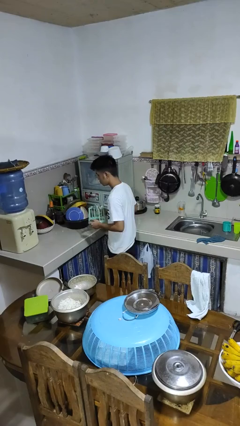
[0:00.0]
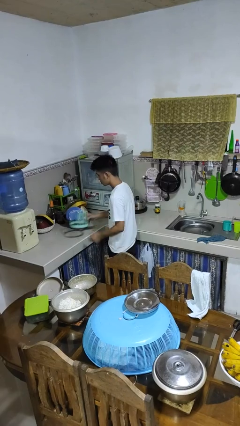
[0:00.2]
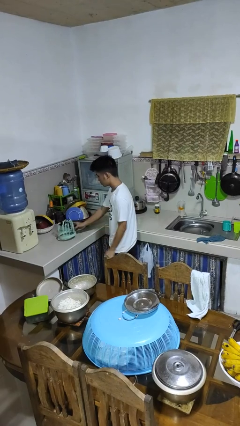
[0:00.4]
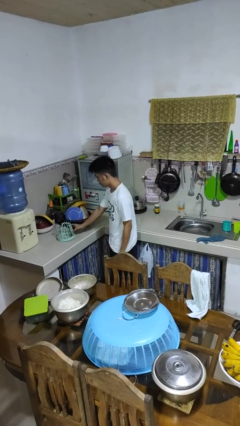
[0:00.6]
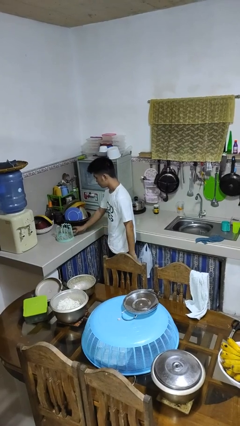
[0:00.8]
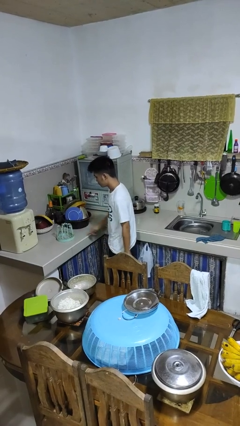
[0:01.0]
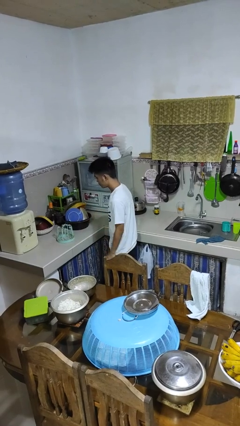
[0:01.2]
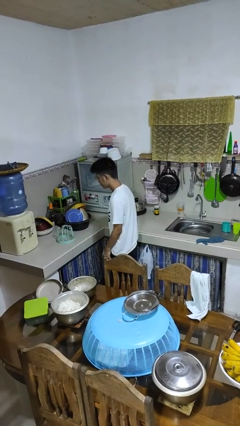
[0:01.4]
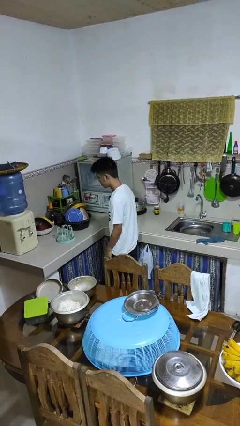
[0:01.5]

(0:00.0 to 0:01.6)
person puts down object on countertop

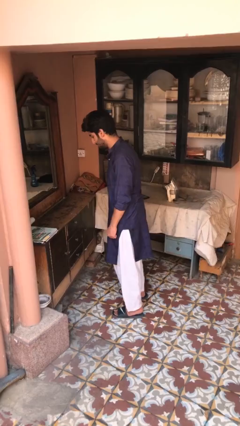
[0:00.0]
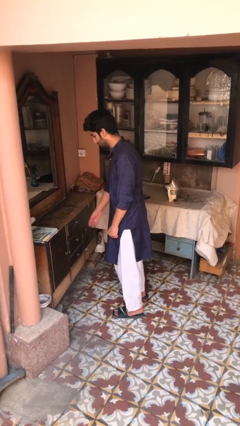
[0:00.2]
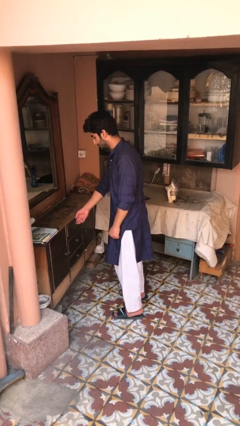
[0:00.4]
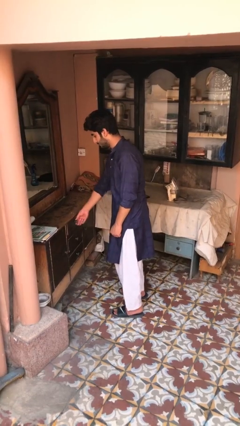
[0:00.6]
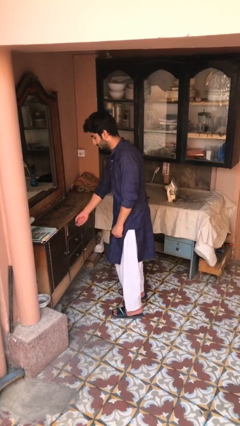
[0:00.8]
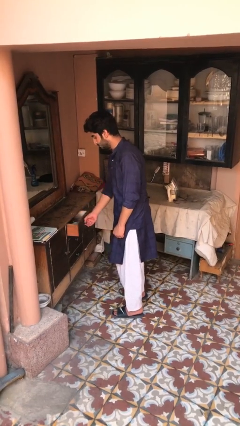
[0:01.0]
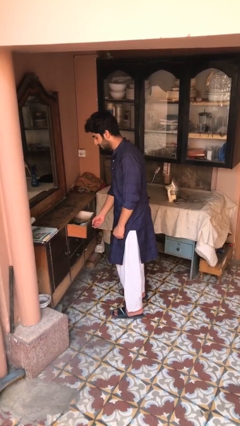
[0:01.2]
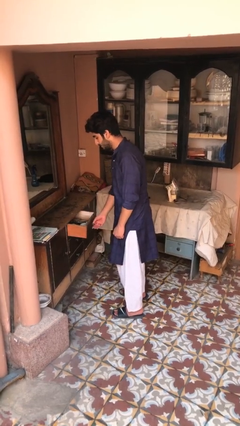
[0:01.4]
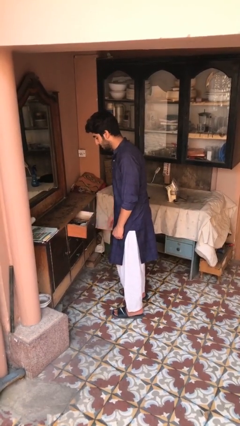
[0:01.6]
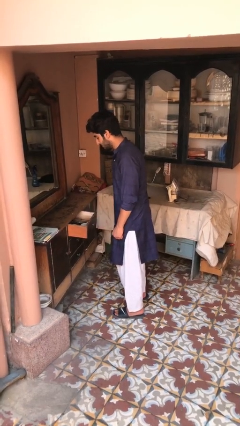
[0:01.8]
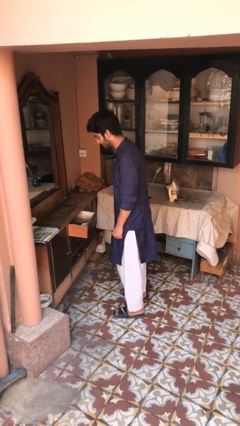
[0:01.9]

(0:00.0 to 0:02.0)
person opens dresser drawer

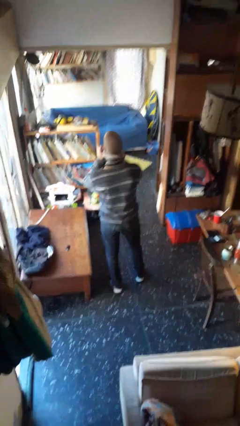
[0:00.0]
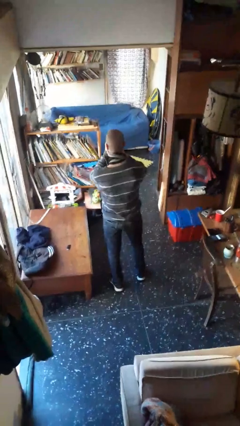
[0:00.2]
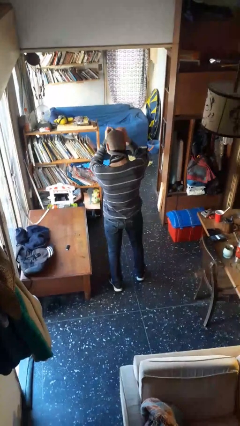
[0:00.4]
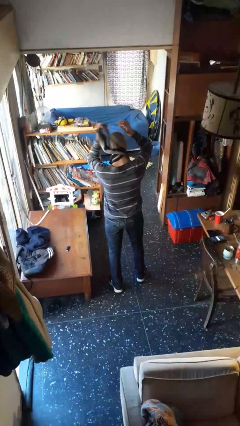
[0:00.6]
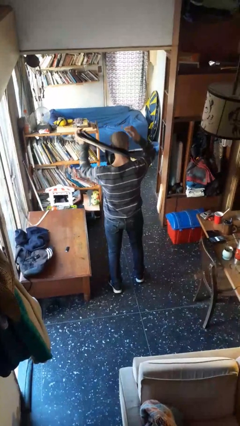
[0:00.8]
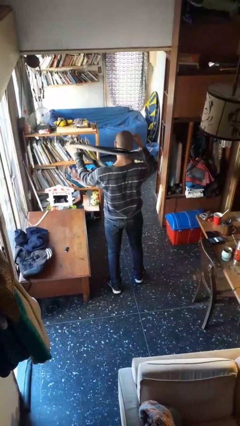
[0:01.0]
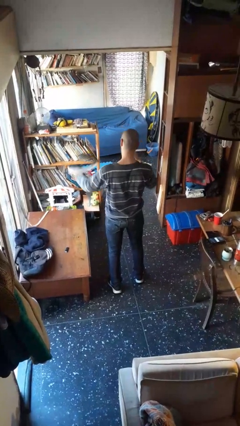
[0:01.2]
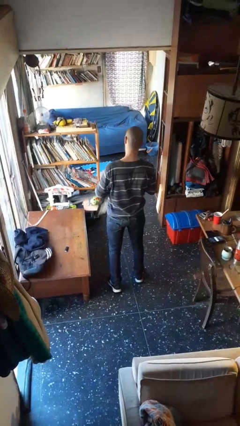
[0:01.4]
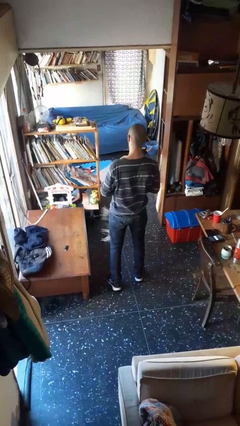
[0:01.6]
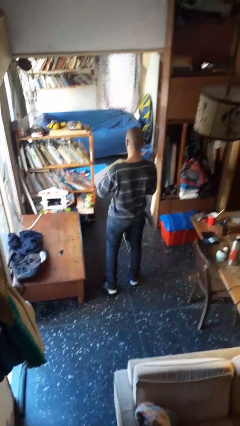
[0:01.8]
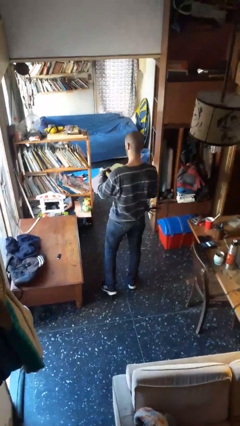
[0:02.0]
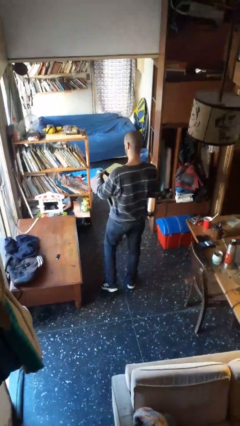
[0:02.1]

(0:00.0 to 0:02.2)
person takes off scarf

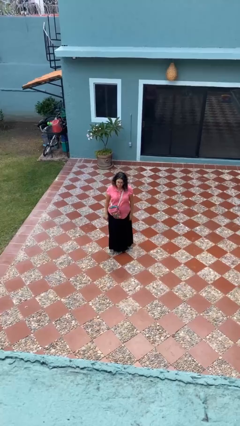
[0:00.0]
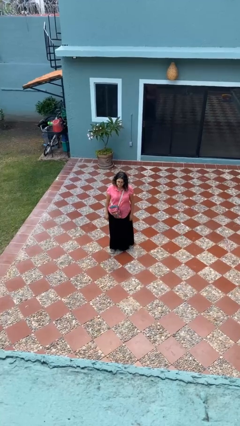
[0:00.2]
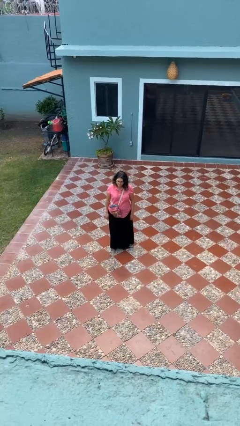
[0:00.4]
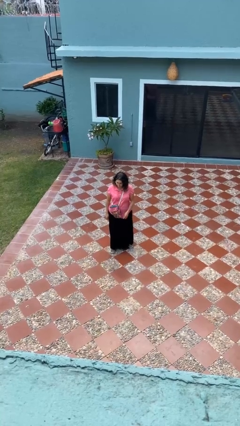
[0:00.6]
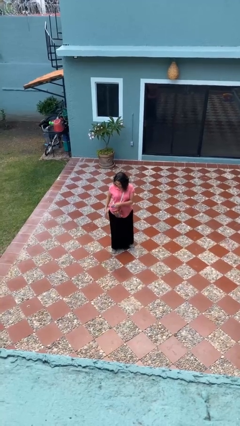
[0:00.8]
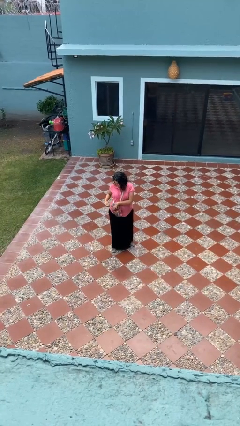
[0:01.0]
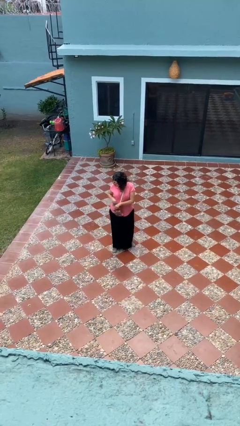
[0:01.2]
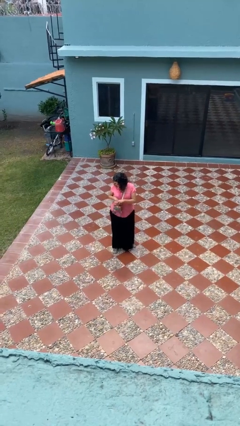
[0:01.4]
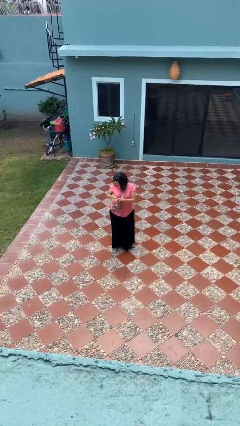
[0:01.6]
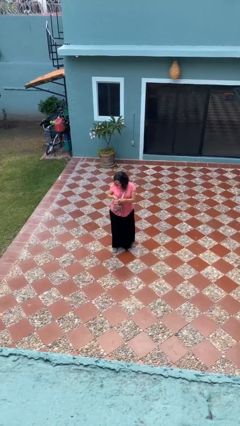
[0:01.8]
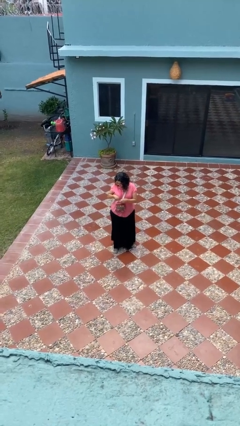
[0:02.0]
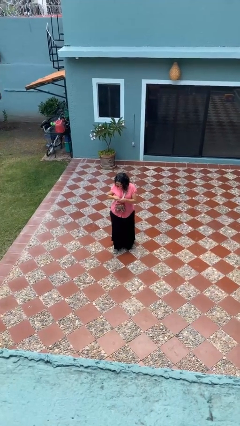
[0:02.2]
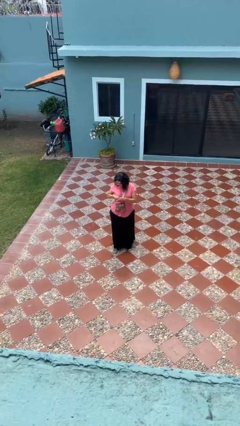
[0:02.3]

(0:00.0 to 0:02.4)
person searches in purse

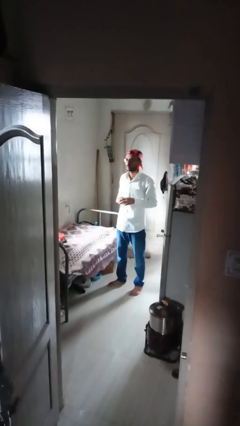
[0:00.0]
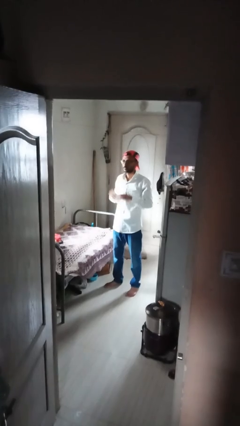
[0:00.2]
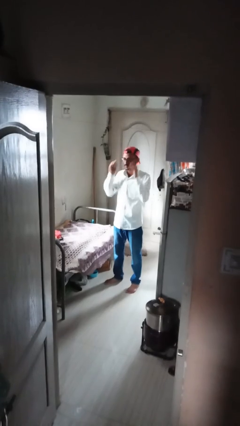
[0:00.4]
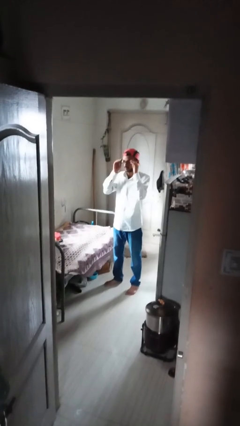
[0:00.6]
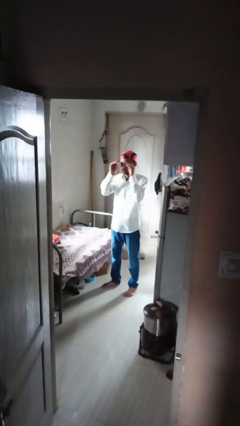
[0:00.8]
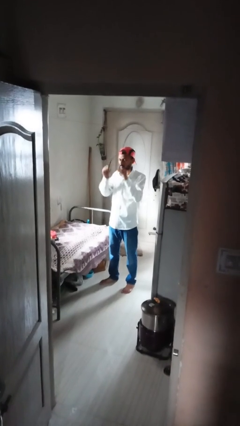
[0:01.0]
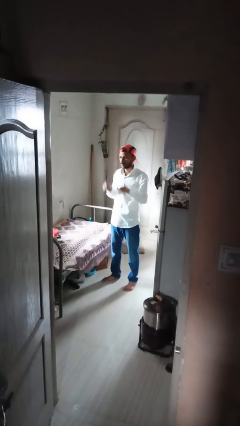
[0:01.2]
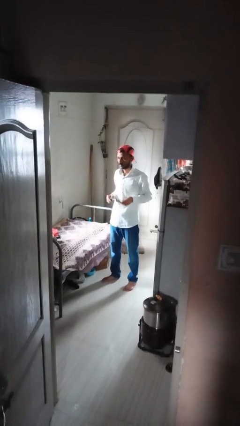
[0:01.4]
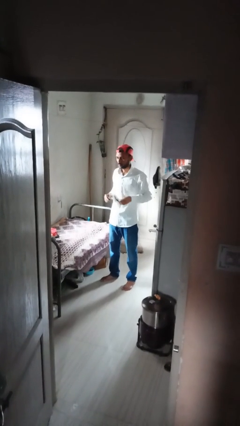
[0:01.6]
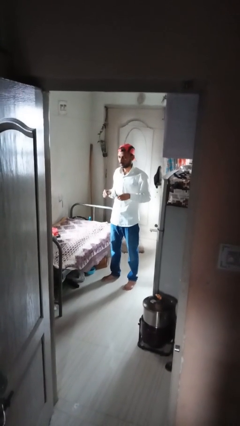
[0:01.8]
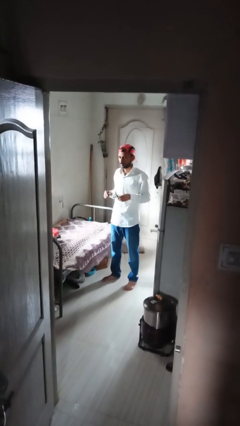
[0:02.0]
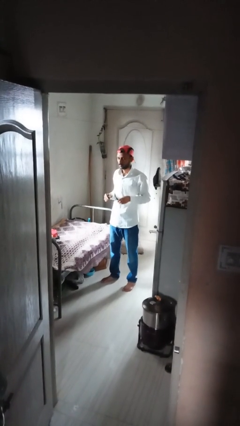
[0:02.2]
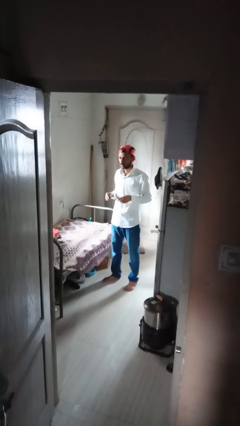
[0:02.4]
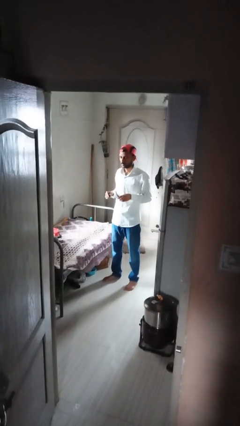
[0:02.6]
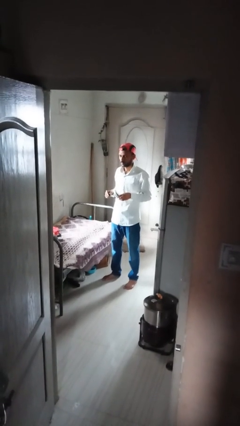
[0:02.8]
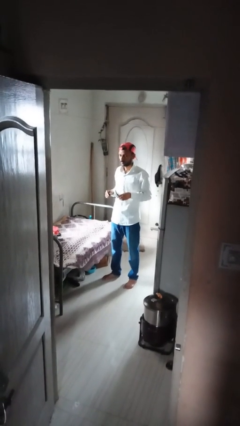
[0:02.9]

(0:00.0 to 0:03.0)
person takes off glasses

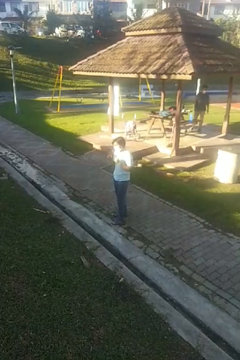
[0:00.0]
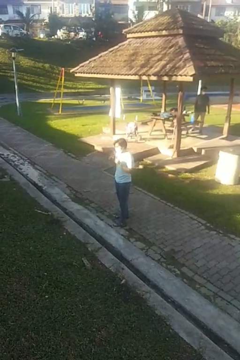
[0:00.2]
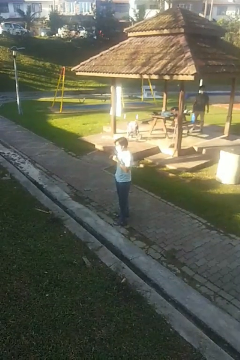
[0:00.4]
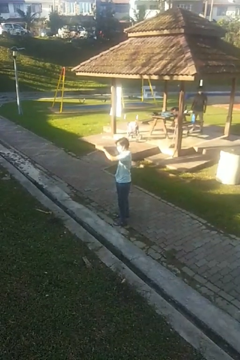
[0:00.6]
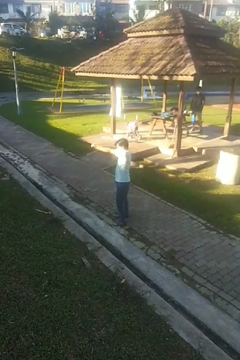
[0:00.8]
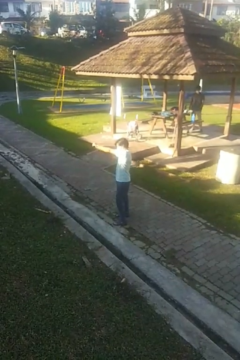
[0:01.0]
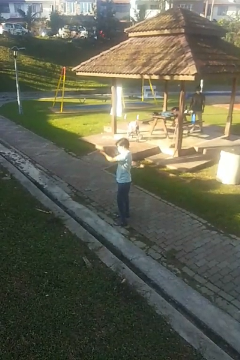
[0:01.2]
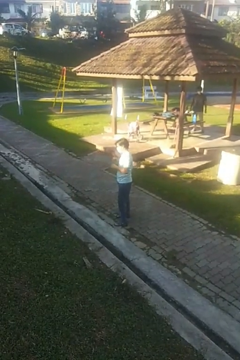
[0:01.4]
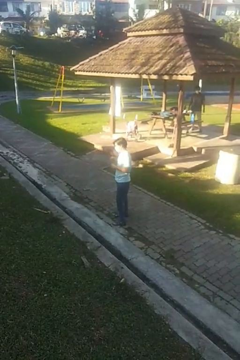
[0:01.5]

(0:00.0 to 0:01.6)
person punches

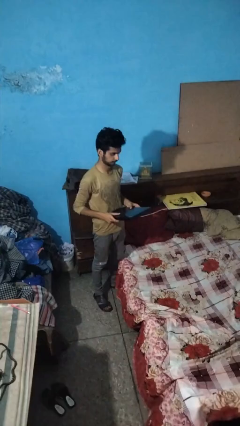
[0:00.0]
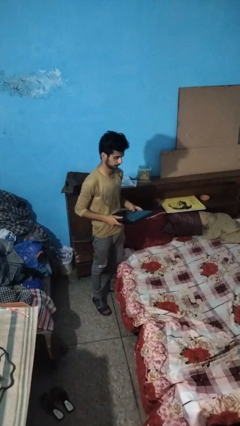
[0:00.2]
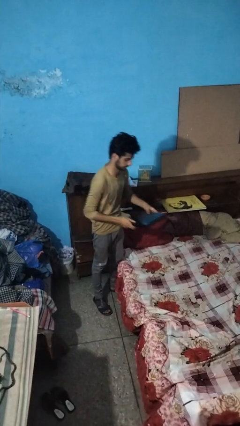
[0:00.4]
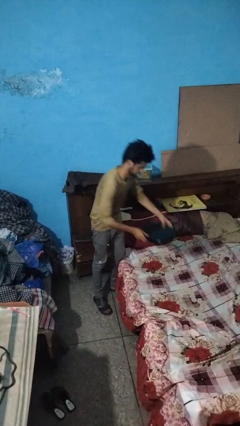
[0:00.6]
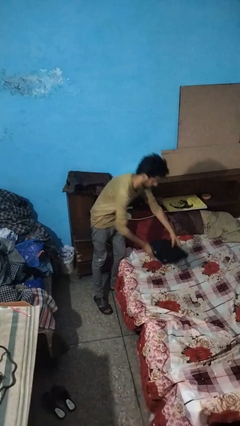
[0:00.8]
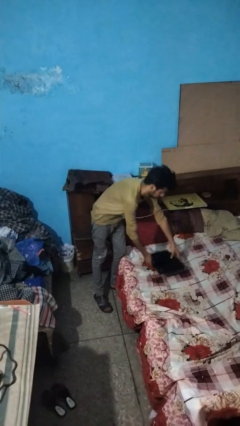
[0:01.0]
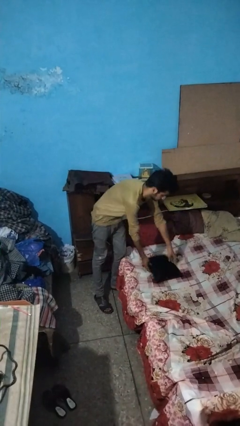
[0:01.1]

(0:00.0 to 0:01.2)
person puts down object on bed

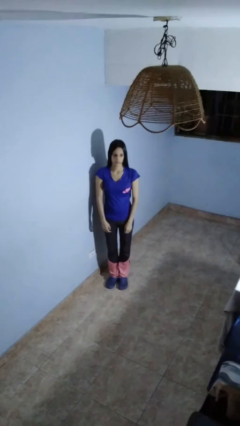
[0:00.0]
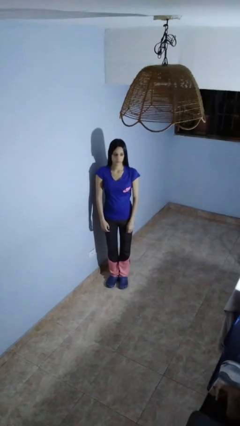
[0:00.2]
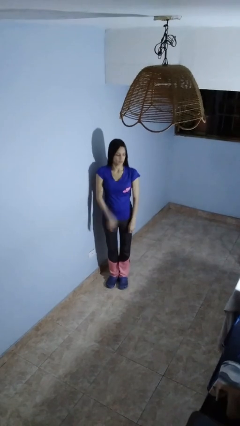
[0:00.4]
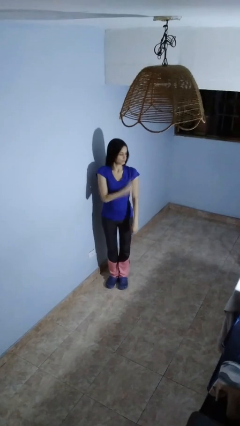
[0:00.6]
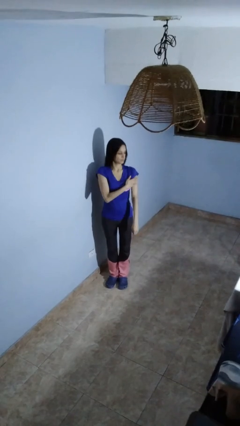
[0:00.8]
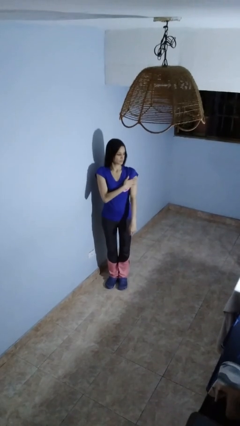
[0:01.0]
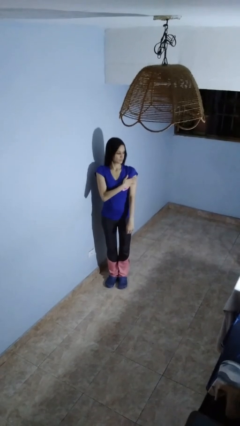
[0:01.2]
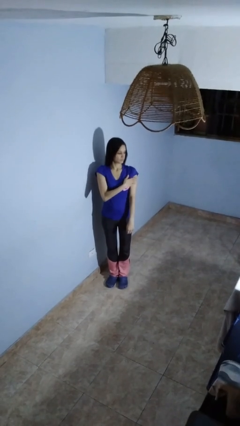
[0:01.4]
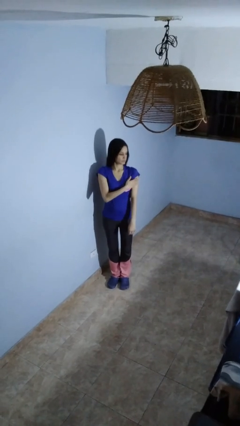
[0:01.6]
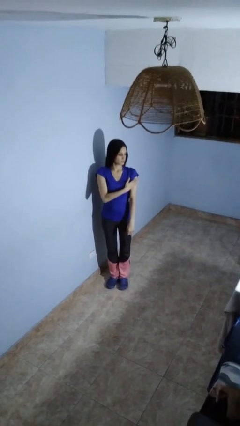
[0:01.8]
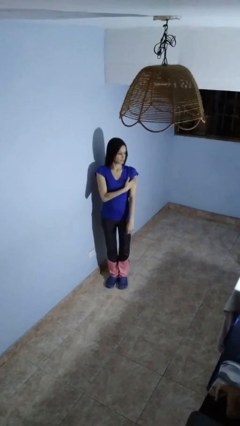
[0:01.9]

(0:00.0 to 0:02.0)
person swats bug

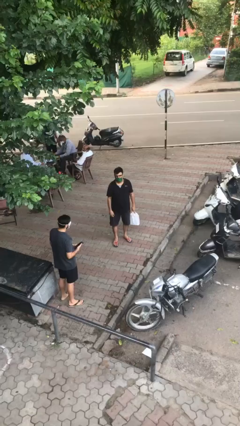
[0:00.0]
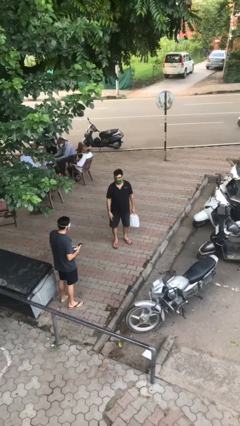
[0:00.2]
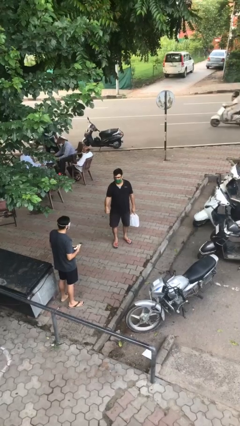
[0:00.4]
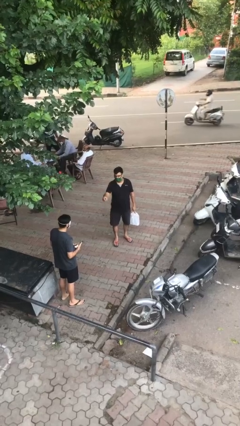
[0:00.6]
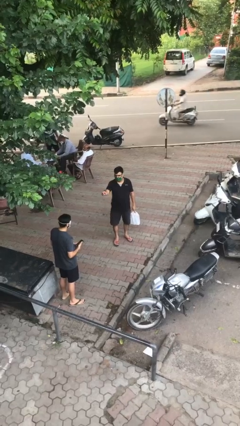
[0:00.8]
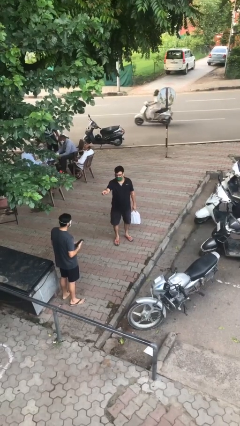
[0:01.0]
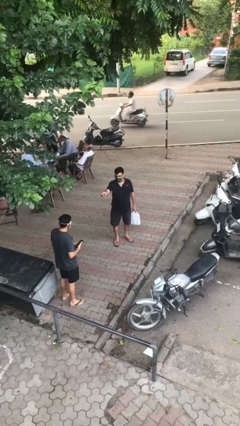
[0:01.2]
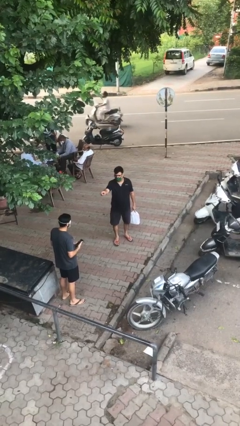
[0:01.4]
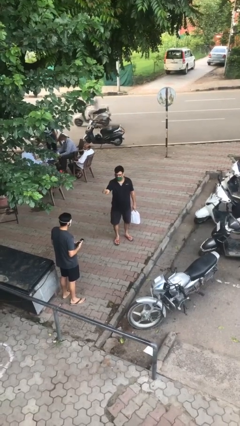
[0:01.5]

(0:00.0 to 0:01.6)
person points at person
